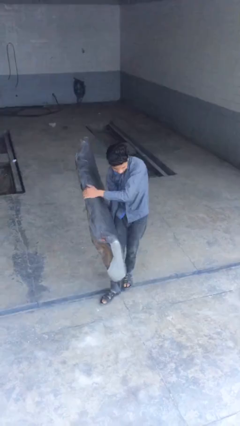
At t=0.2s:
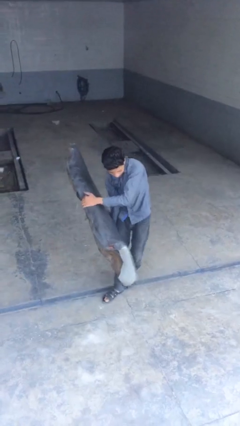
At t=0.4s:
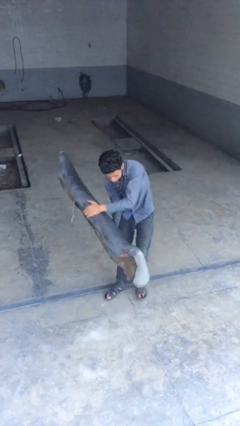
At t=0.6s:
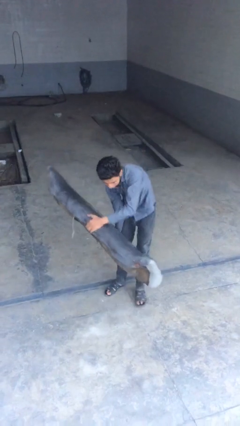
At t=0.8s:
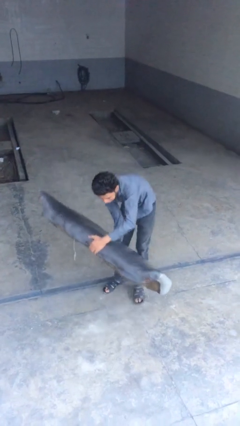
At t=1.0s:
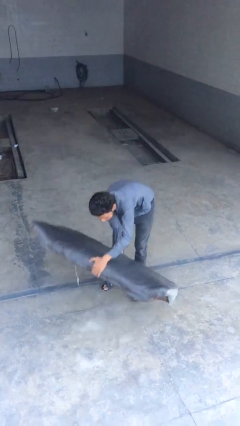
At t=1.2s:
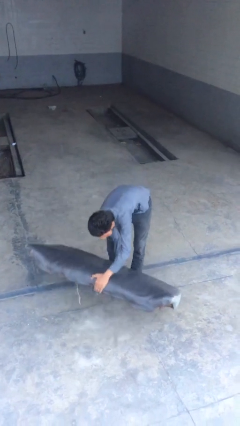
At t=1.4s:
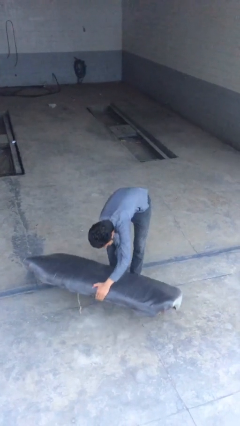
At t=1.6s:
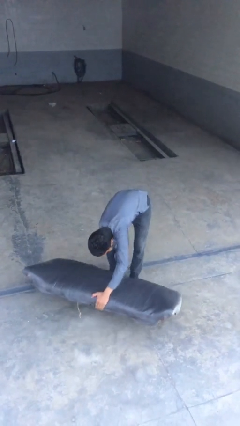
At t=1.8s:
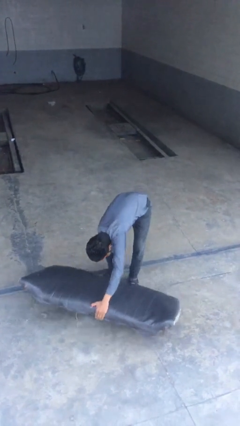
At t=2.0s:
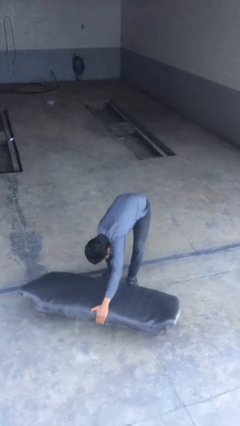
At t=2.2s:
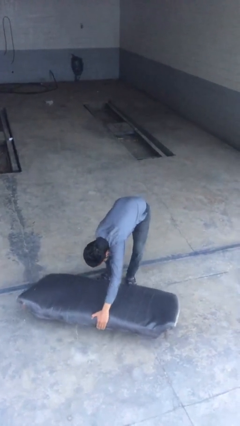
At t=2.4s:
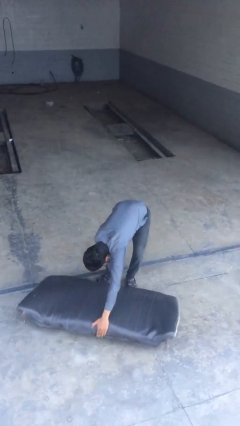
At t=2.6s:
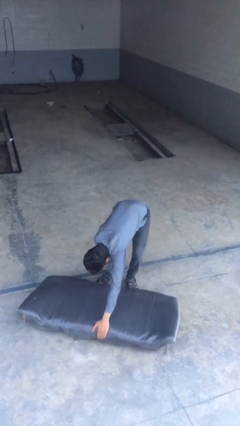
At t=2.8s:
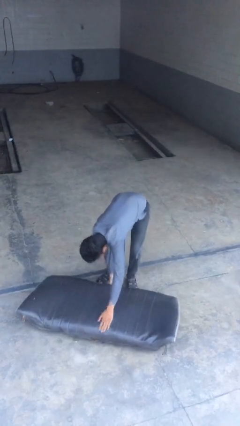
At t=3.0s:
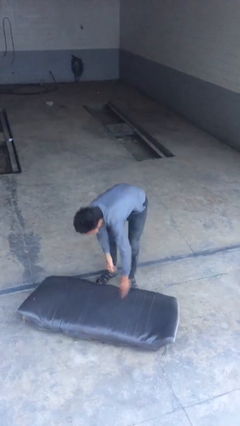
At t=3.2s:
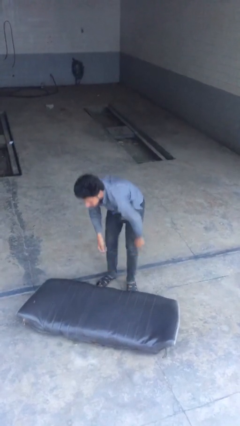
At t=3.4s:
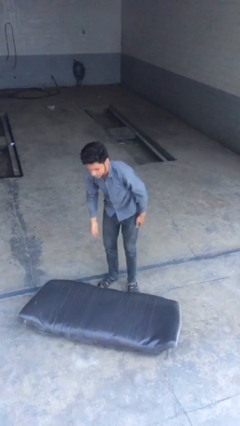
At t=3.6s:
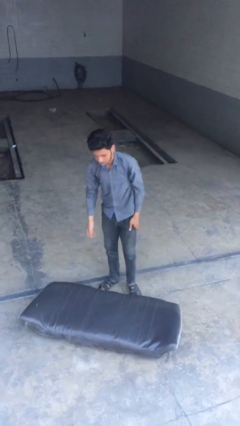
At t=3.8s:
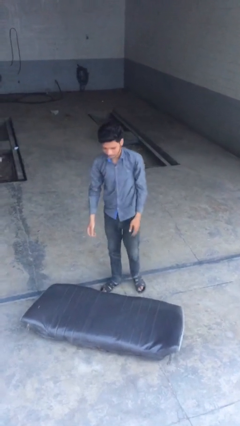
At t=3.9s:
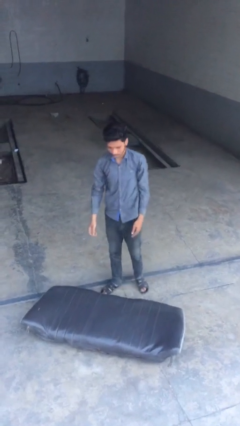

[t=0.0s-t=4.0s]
person puts down object on floor

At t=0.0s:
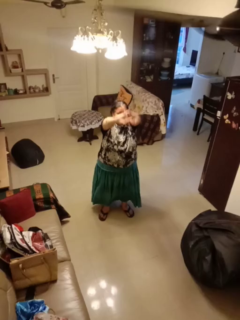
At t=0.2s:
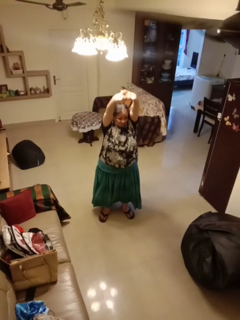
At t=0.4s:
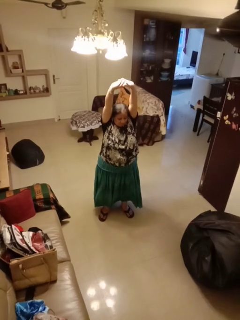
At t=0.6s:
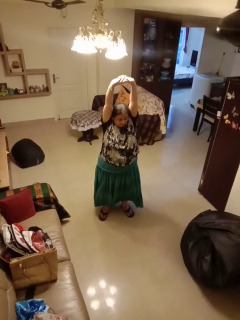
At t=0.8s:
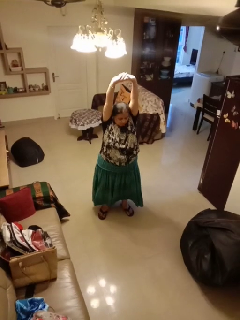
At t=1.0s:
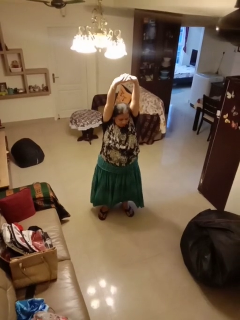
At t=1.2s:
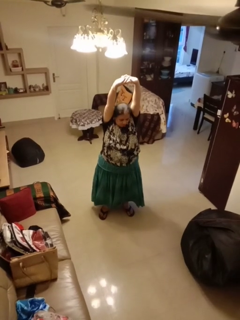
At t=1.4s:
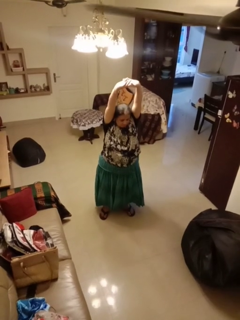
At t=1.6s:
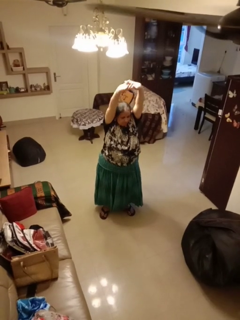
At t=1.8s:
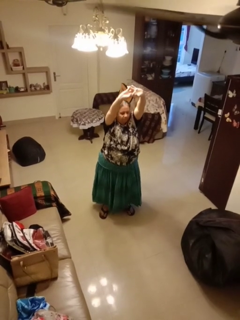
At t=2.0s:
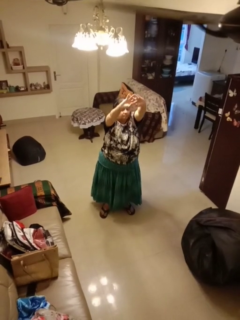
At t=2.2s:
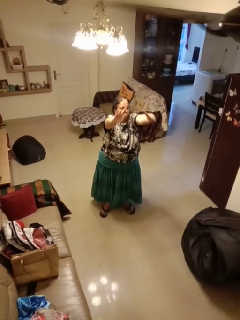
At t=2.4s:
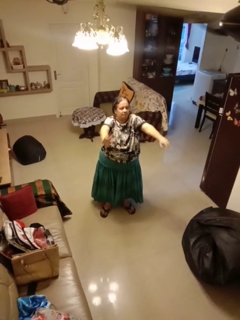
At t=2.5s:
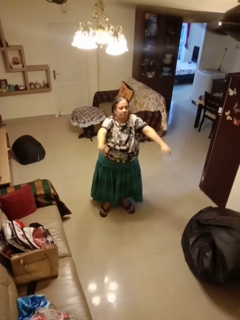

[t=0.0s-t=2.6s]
person stretches arms over head

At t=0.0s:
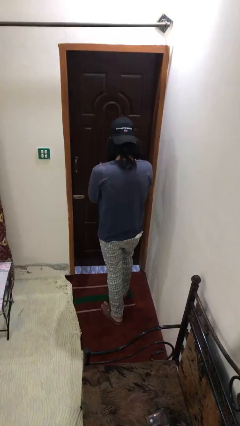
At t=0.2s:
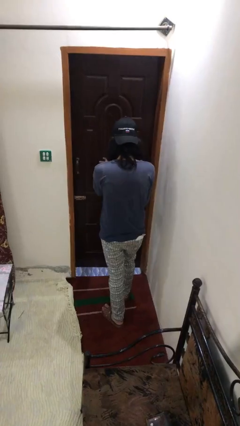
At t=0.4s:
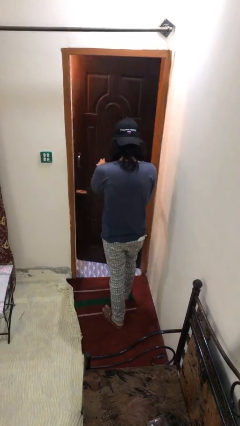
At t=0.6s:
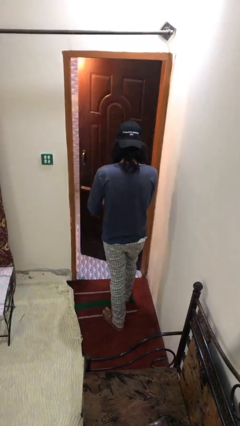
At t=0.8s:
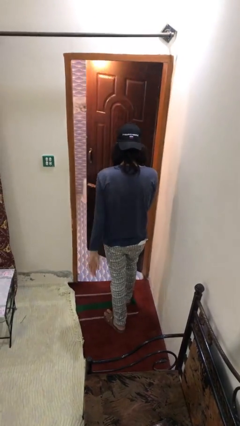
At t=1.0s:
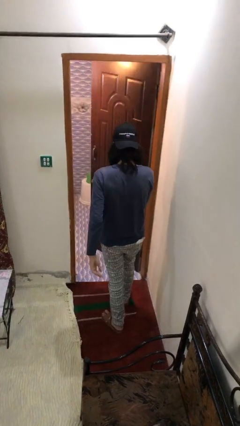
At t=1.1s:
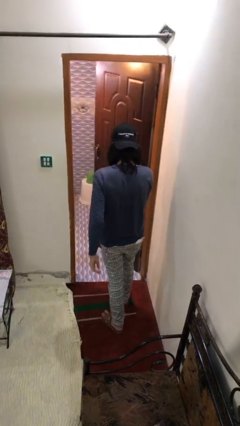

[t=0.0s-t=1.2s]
person opens facility door

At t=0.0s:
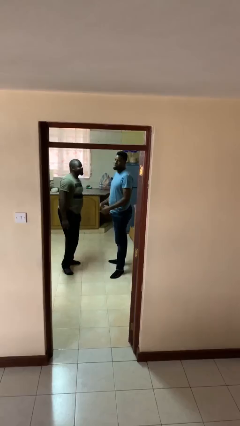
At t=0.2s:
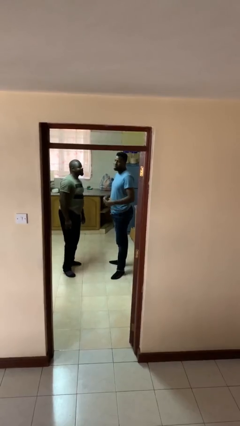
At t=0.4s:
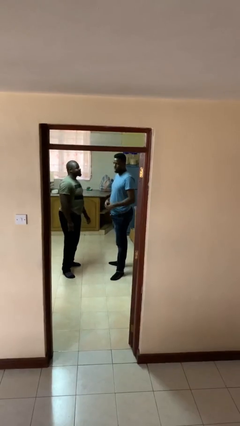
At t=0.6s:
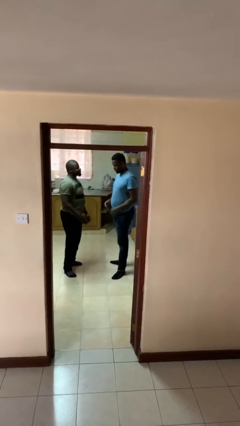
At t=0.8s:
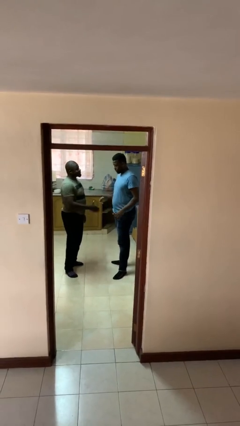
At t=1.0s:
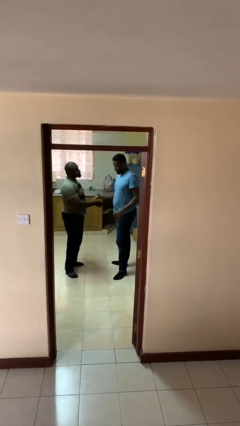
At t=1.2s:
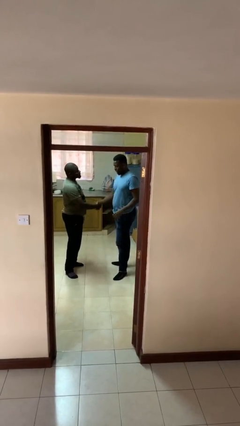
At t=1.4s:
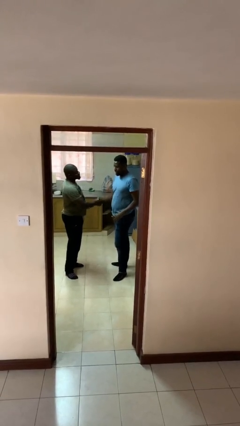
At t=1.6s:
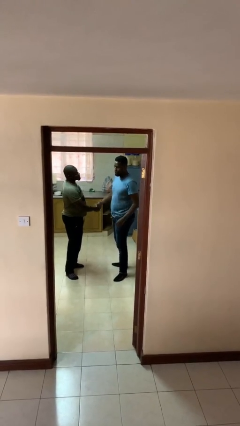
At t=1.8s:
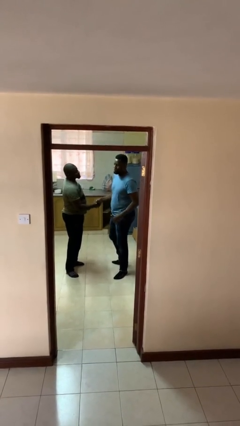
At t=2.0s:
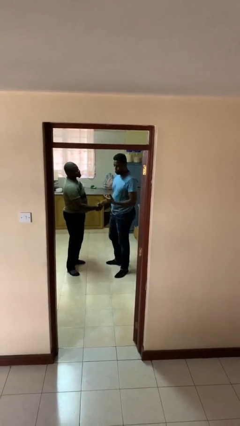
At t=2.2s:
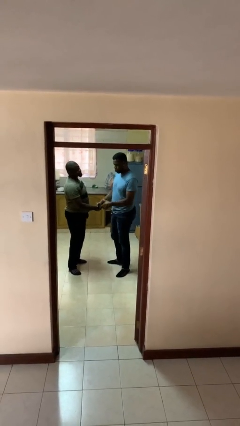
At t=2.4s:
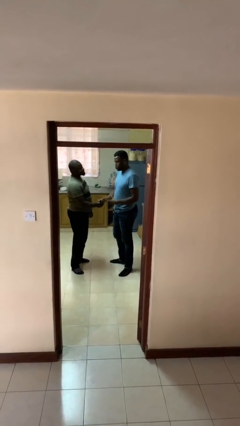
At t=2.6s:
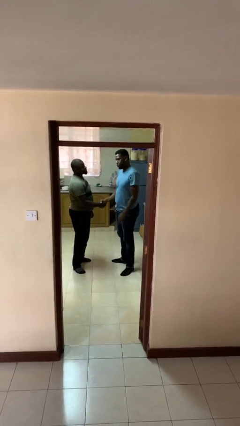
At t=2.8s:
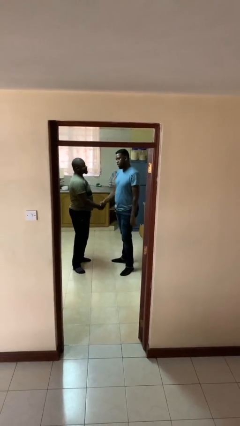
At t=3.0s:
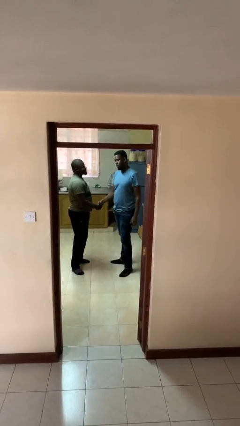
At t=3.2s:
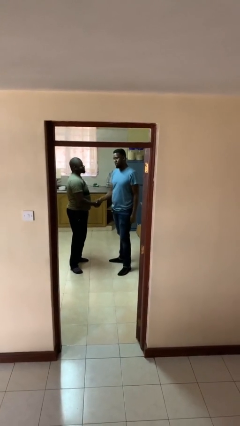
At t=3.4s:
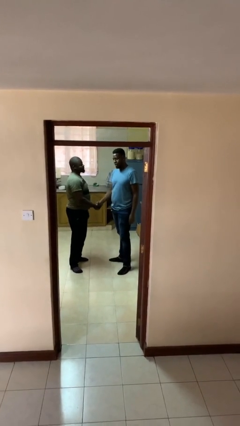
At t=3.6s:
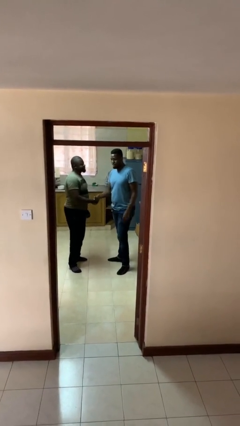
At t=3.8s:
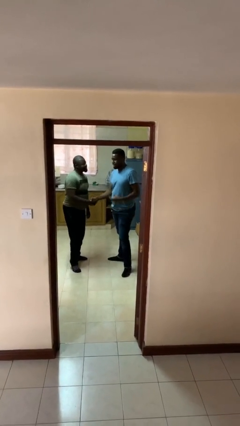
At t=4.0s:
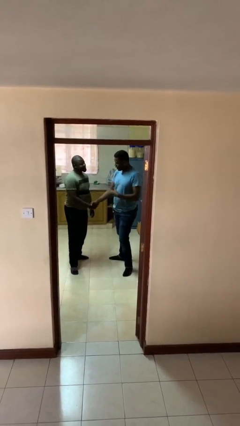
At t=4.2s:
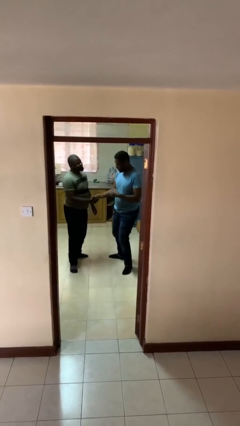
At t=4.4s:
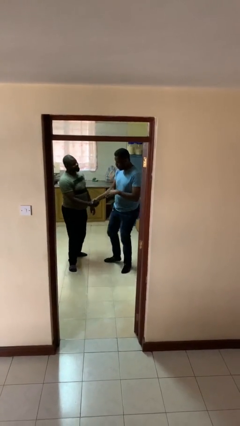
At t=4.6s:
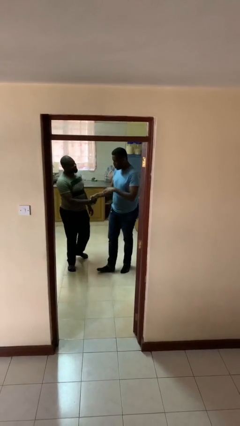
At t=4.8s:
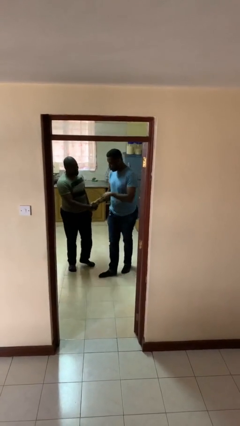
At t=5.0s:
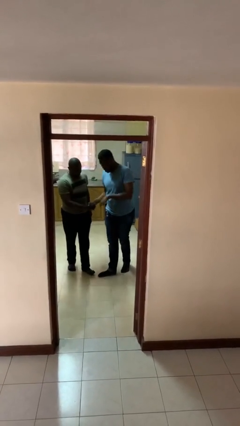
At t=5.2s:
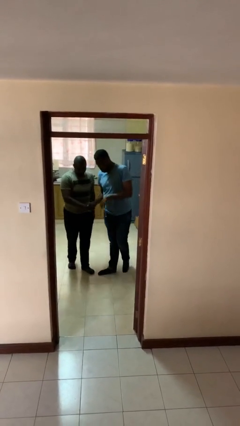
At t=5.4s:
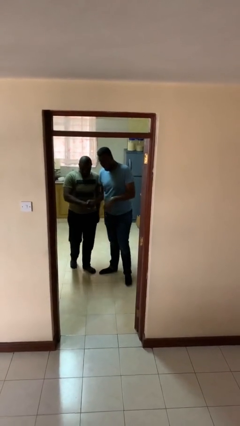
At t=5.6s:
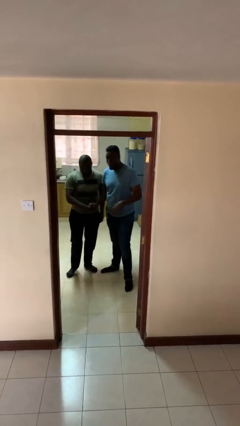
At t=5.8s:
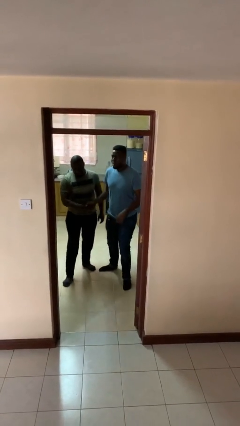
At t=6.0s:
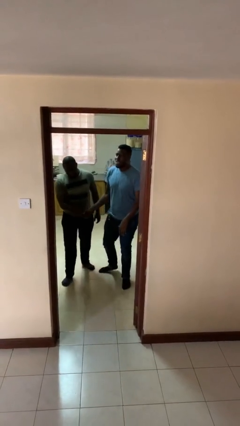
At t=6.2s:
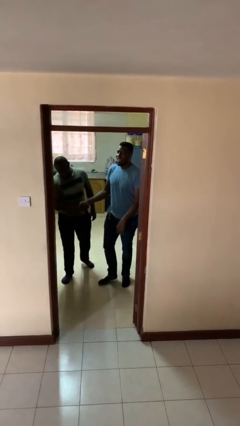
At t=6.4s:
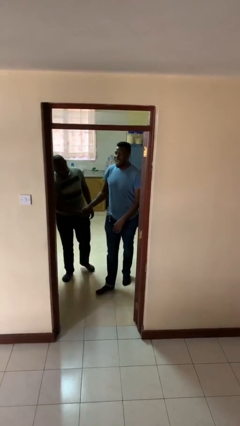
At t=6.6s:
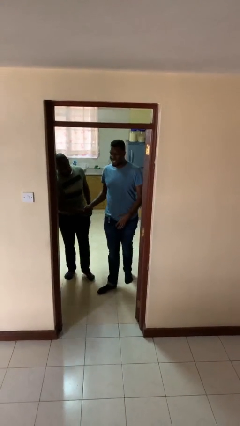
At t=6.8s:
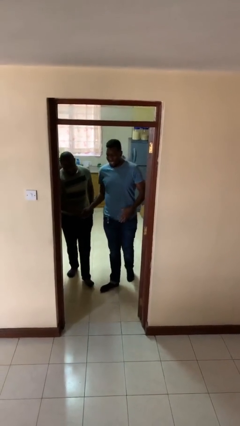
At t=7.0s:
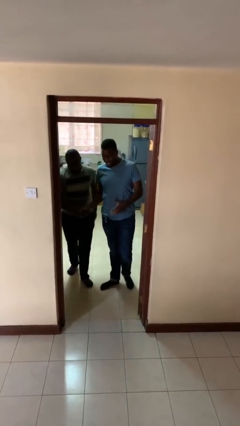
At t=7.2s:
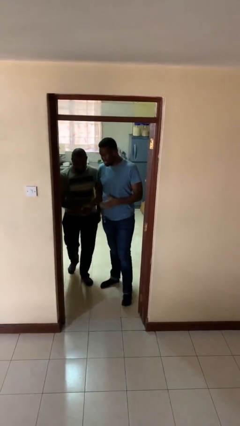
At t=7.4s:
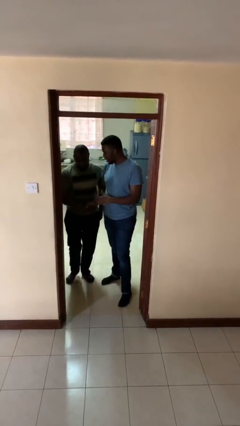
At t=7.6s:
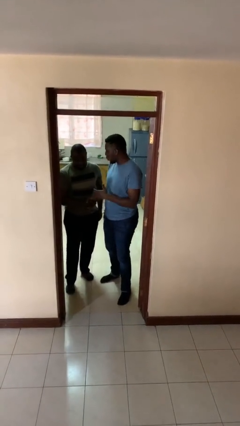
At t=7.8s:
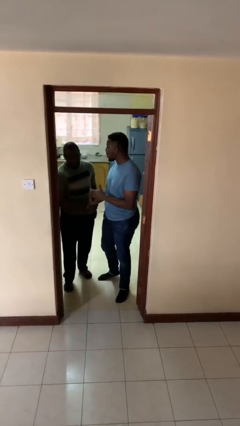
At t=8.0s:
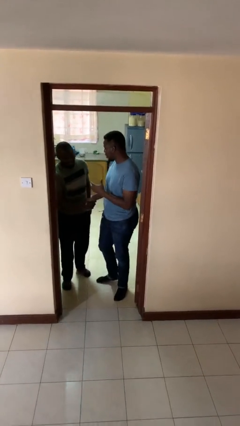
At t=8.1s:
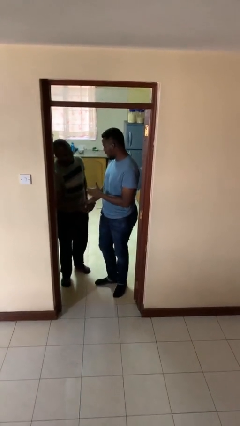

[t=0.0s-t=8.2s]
person holds hand

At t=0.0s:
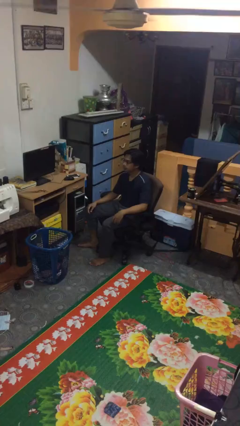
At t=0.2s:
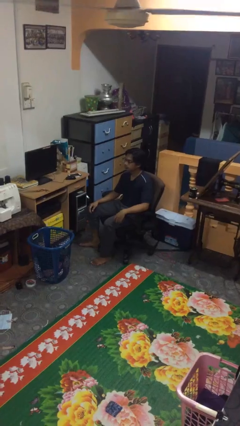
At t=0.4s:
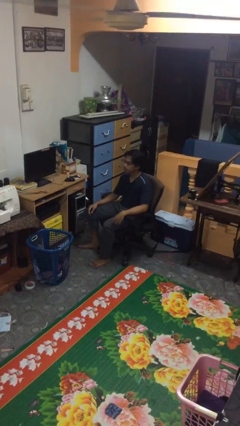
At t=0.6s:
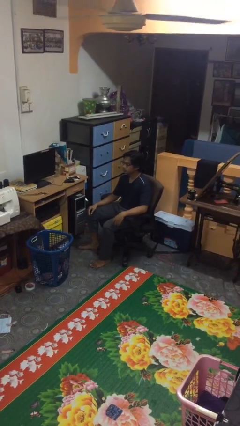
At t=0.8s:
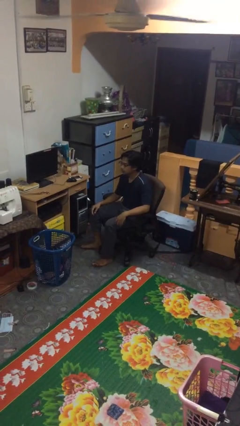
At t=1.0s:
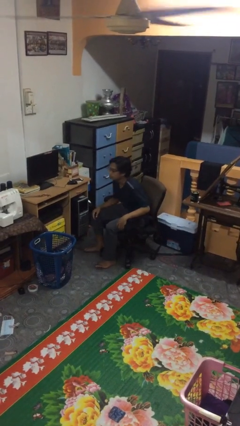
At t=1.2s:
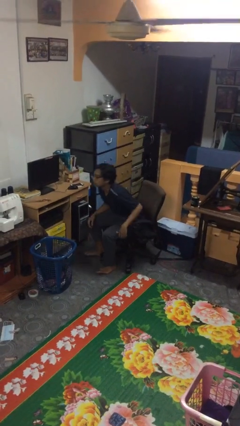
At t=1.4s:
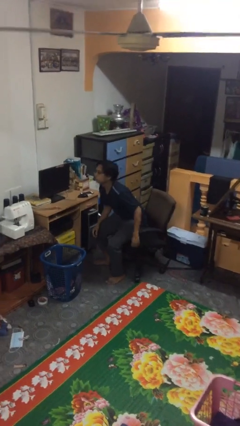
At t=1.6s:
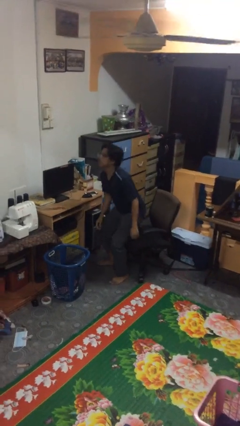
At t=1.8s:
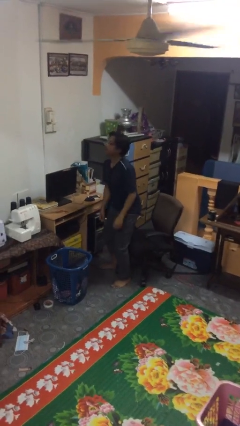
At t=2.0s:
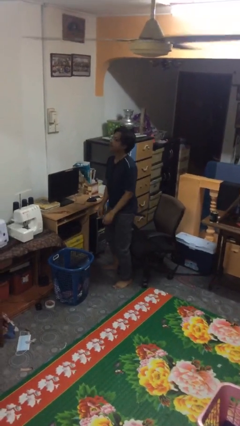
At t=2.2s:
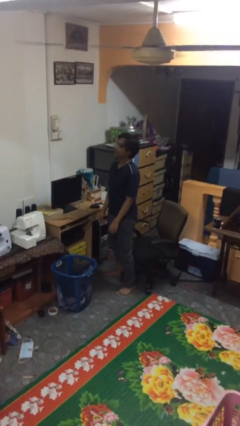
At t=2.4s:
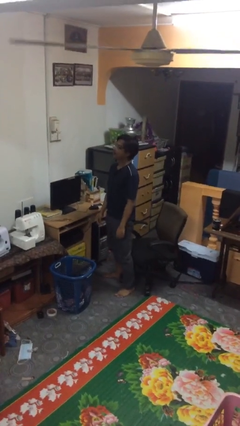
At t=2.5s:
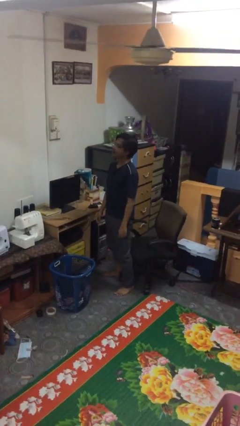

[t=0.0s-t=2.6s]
person stands up
